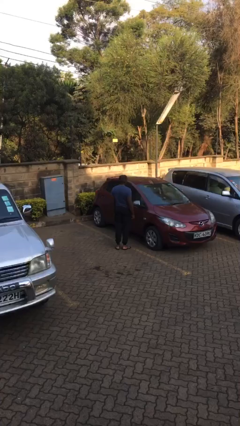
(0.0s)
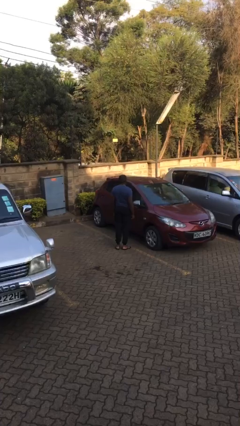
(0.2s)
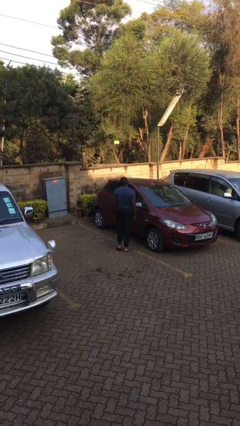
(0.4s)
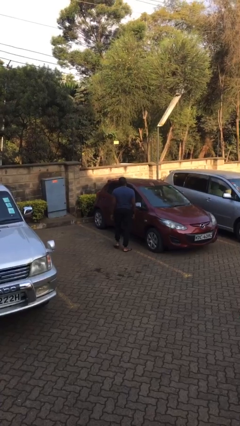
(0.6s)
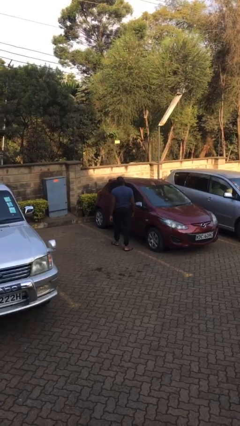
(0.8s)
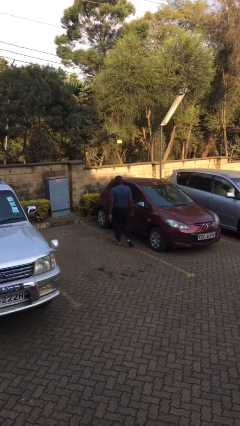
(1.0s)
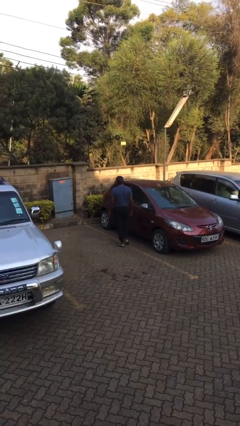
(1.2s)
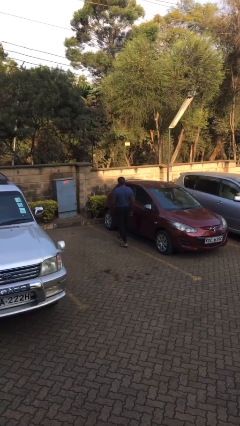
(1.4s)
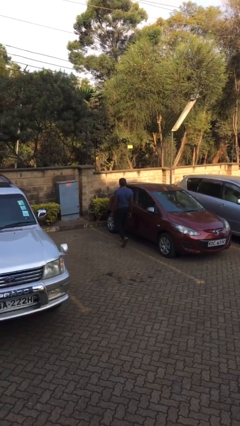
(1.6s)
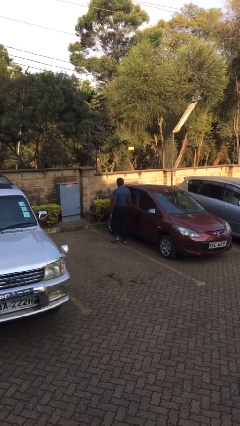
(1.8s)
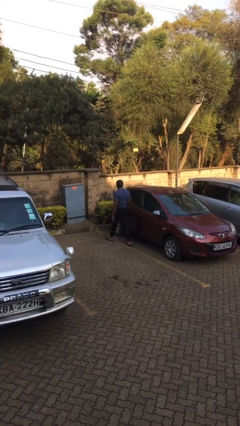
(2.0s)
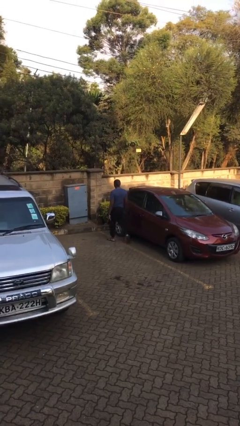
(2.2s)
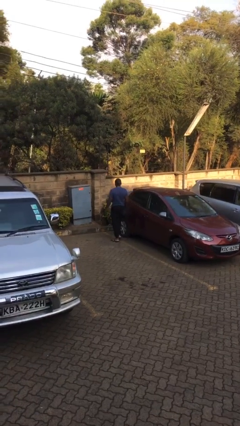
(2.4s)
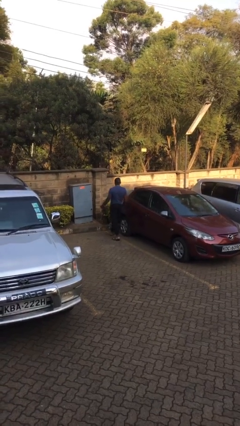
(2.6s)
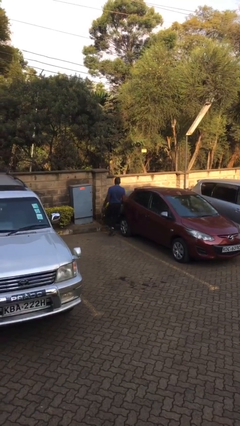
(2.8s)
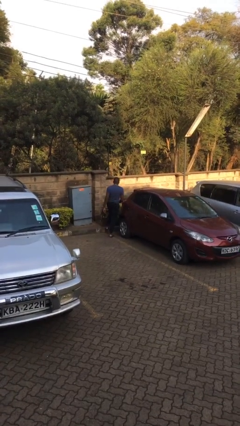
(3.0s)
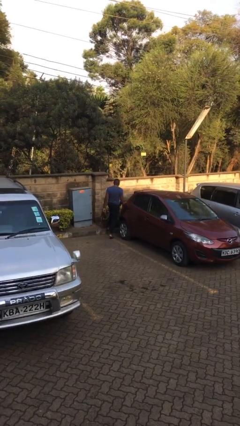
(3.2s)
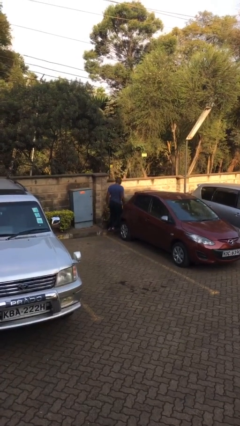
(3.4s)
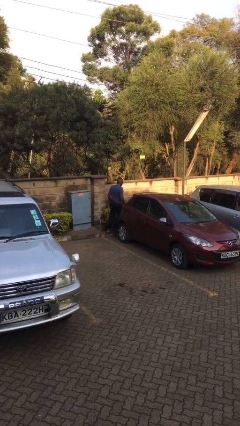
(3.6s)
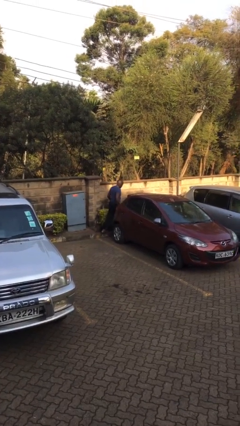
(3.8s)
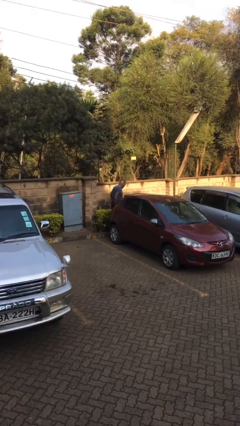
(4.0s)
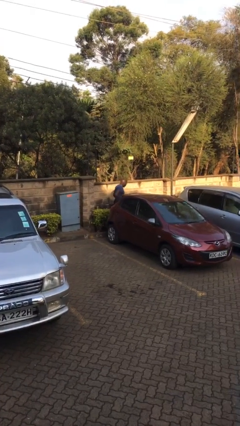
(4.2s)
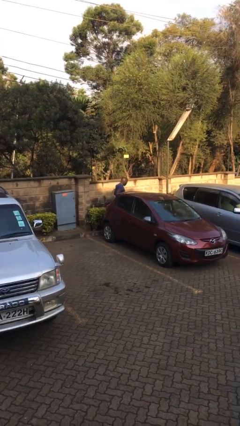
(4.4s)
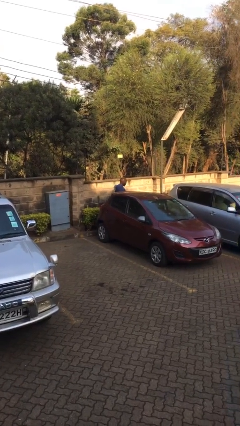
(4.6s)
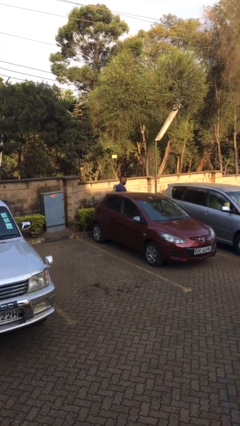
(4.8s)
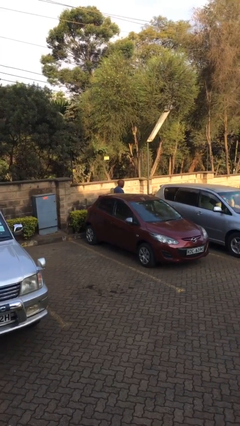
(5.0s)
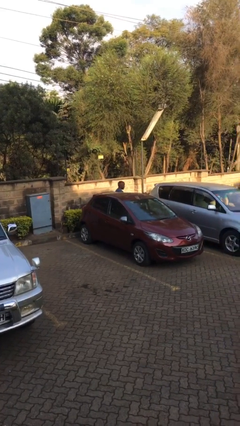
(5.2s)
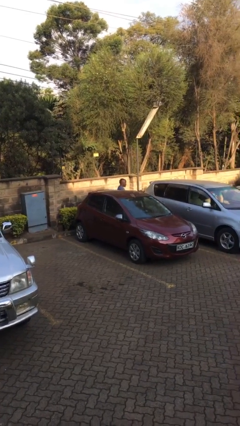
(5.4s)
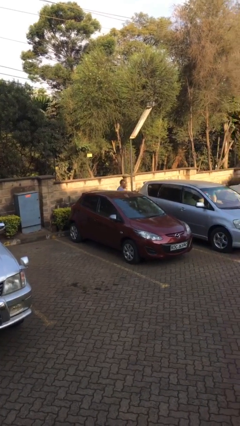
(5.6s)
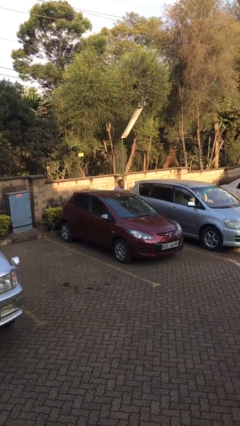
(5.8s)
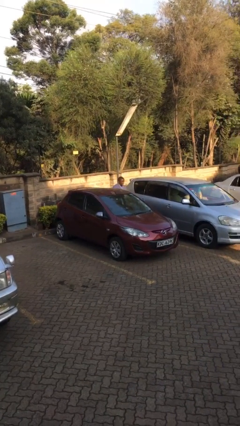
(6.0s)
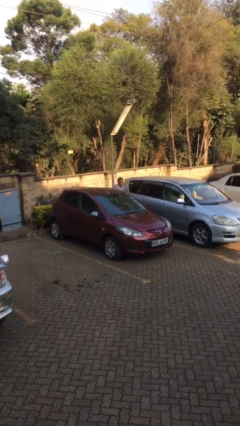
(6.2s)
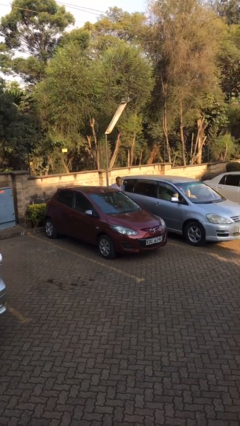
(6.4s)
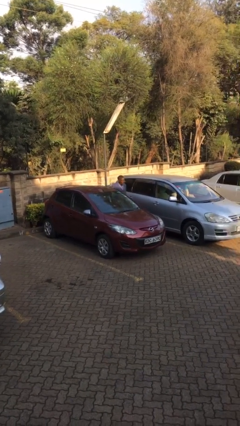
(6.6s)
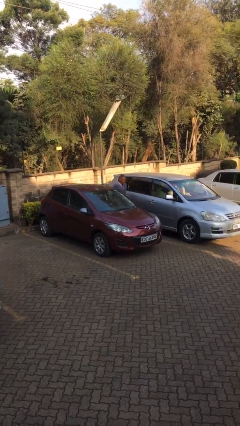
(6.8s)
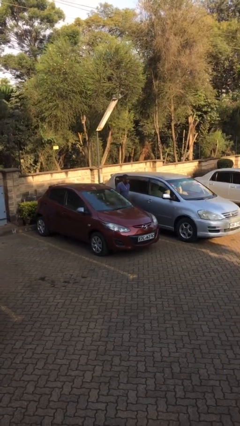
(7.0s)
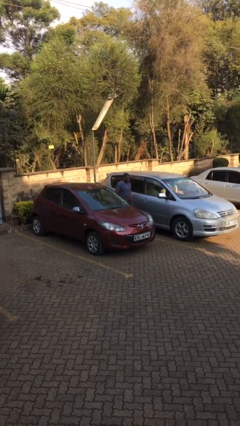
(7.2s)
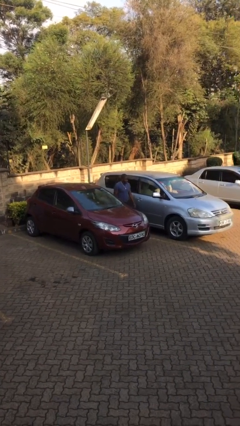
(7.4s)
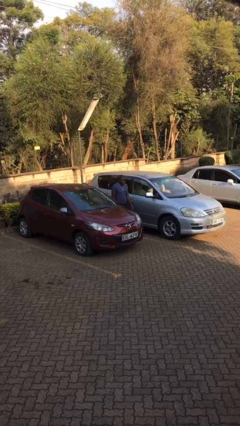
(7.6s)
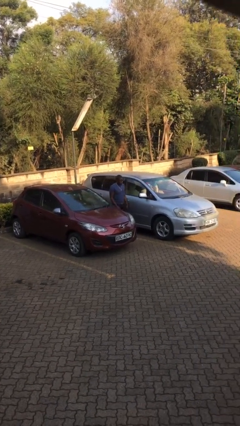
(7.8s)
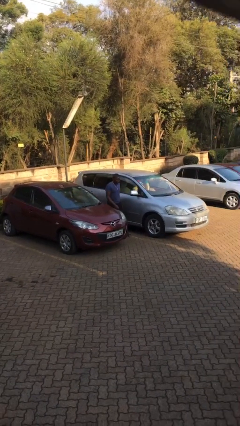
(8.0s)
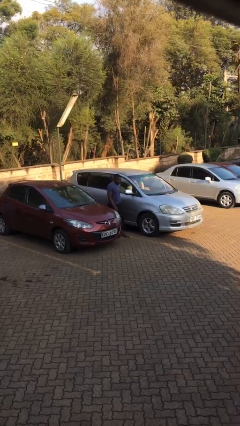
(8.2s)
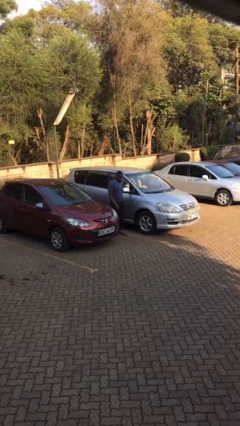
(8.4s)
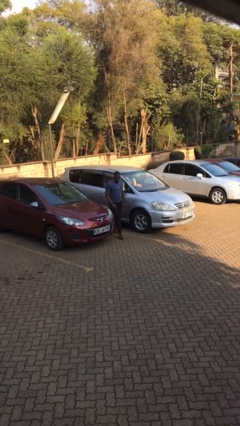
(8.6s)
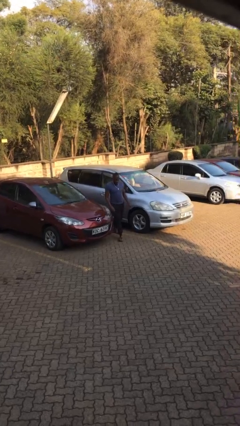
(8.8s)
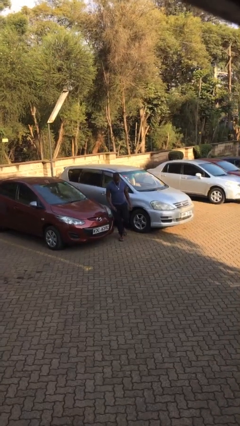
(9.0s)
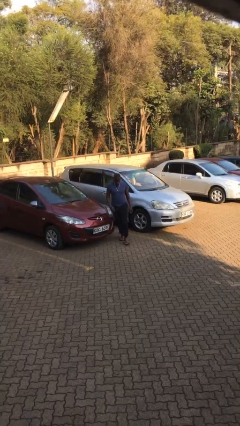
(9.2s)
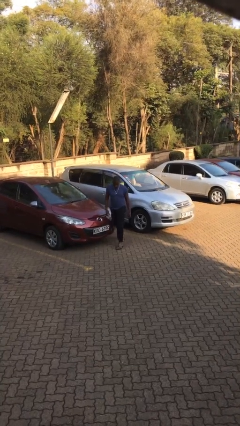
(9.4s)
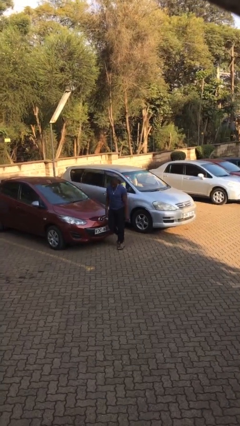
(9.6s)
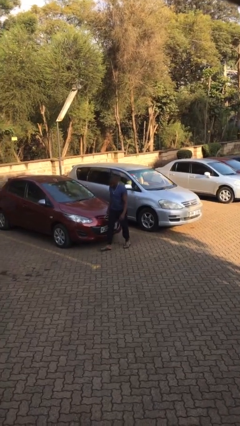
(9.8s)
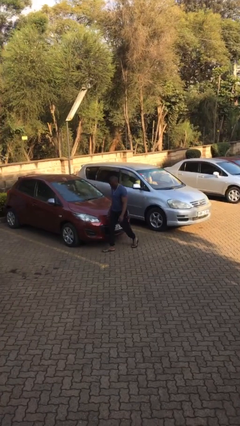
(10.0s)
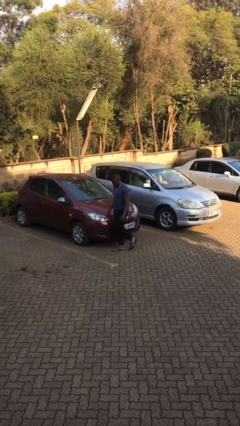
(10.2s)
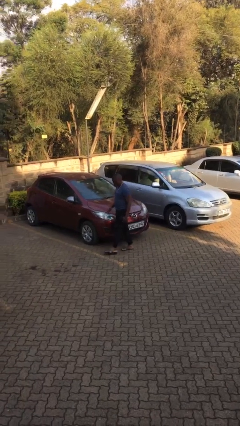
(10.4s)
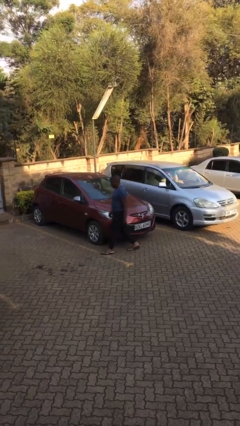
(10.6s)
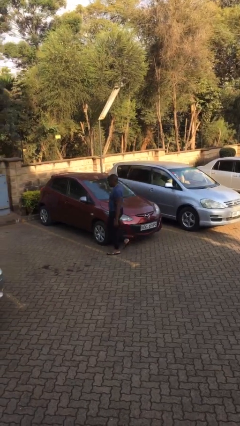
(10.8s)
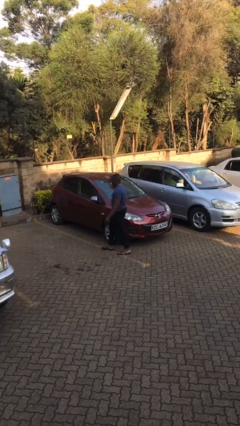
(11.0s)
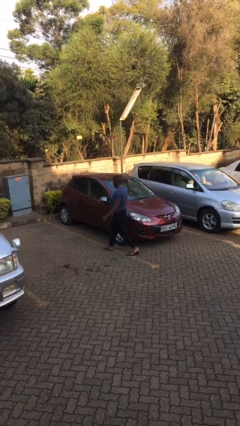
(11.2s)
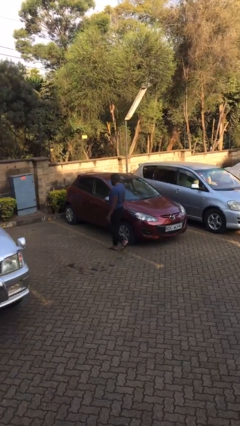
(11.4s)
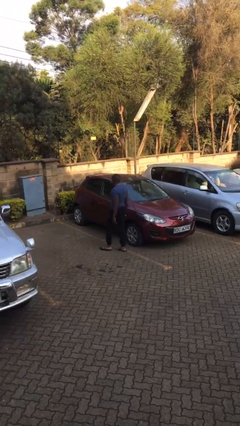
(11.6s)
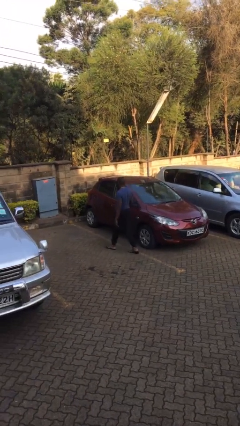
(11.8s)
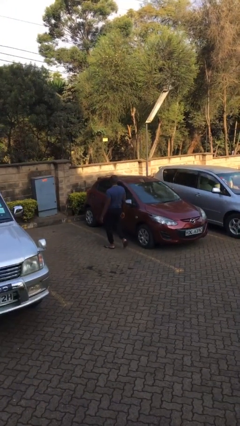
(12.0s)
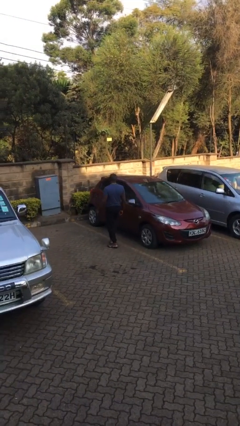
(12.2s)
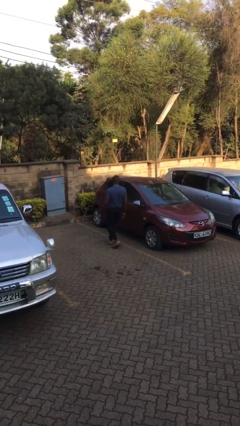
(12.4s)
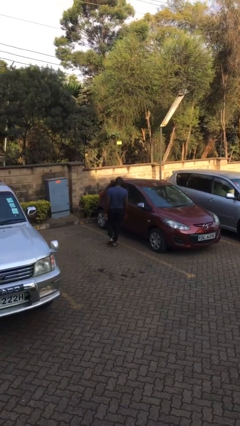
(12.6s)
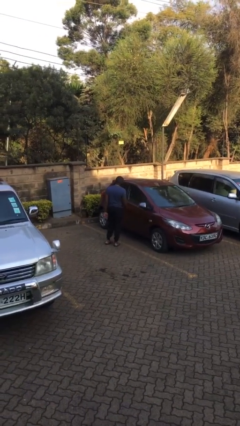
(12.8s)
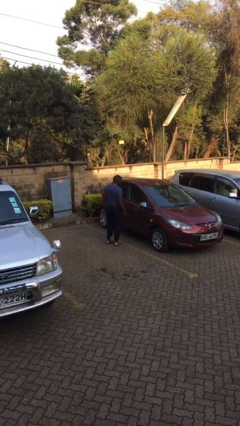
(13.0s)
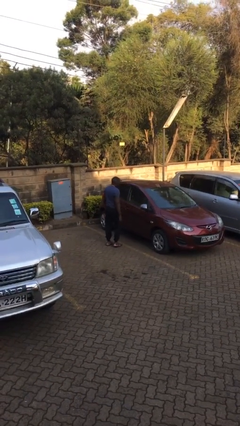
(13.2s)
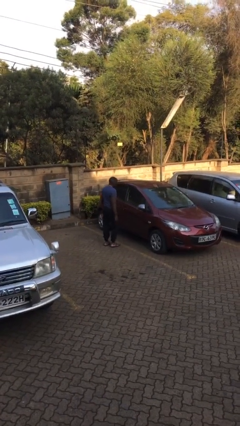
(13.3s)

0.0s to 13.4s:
person walks around car

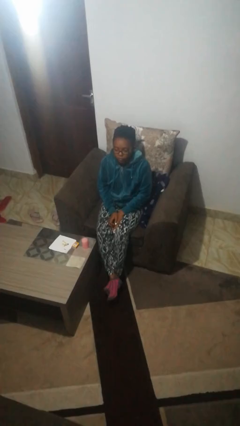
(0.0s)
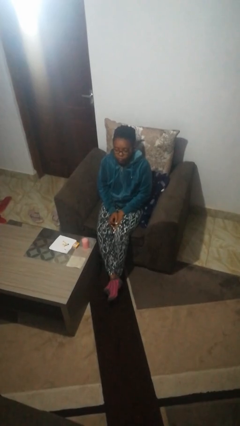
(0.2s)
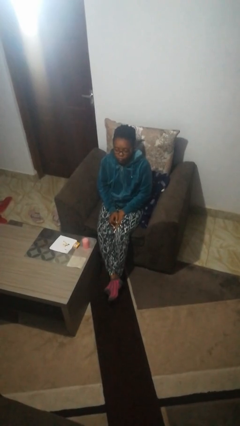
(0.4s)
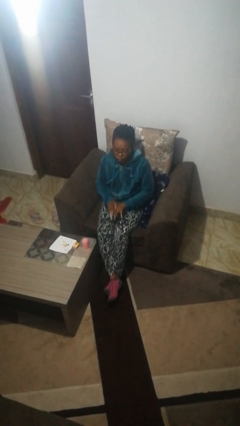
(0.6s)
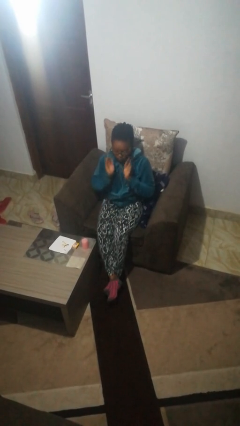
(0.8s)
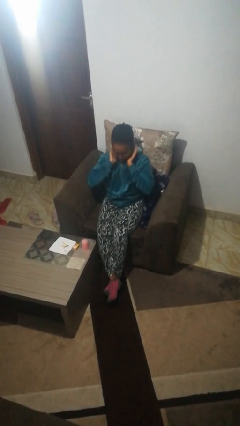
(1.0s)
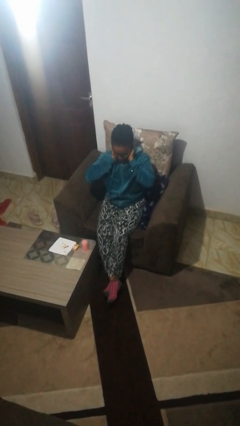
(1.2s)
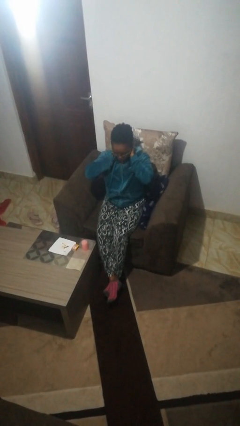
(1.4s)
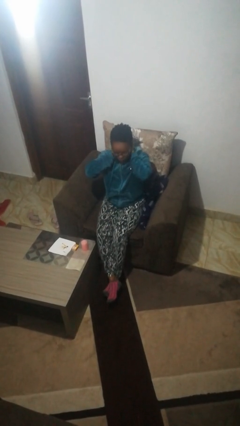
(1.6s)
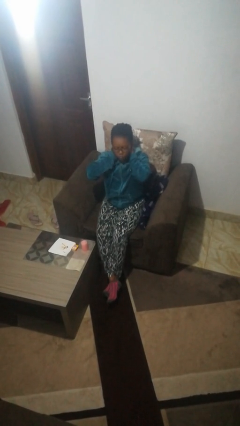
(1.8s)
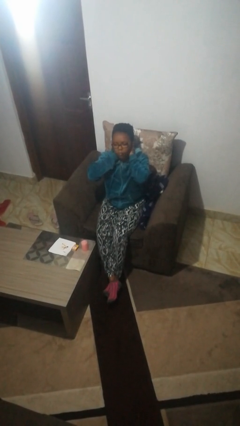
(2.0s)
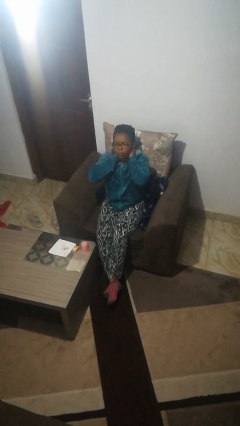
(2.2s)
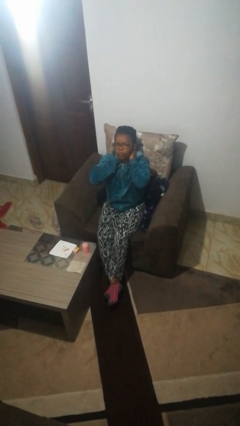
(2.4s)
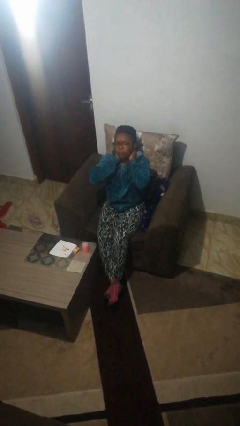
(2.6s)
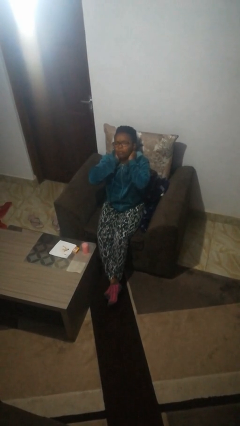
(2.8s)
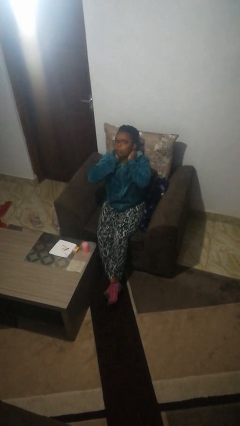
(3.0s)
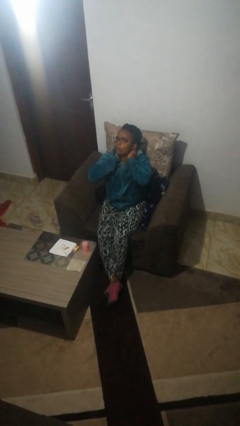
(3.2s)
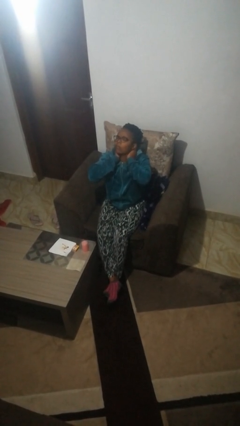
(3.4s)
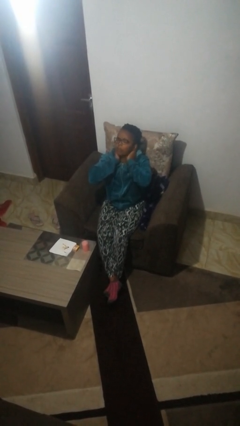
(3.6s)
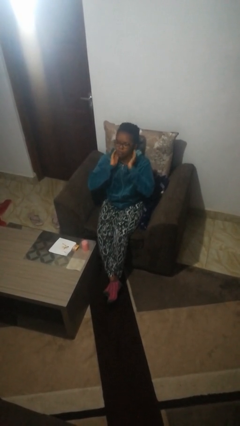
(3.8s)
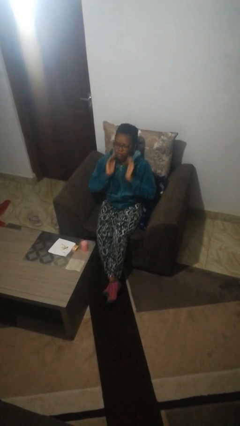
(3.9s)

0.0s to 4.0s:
person rubs neck

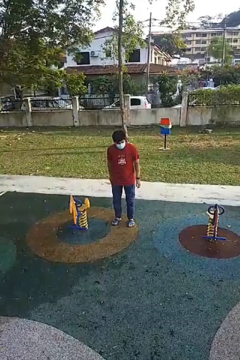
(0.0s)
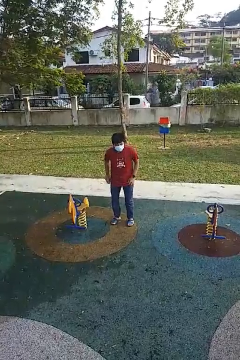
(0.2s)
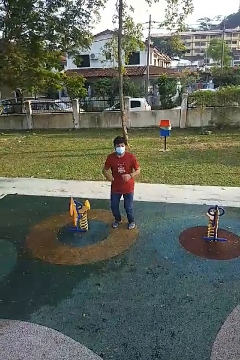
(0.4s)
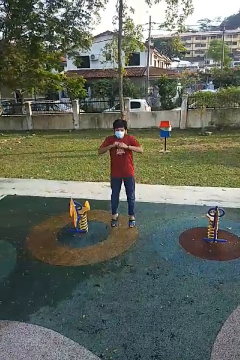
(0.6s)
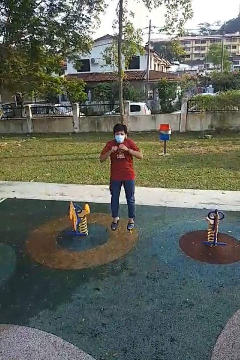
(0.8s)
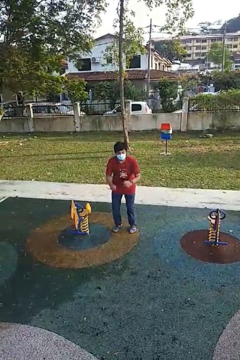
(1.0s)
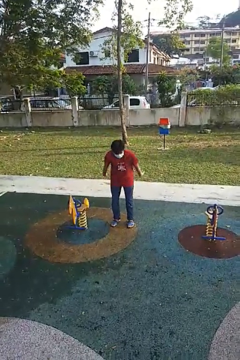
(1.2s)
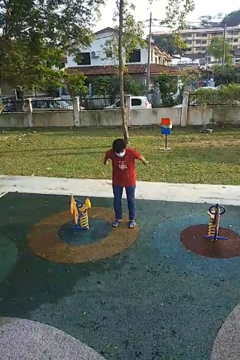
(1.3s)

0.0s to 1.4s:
person jumps
